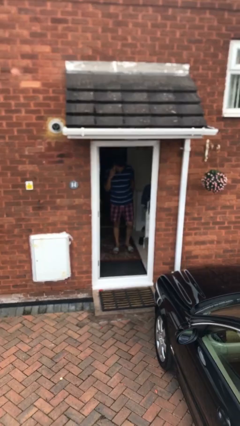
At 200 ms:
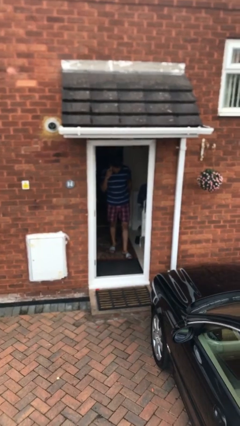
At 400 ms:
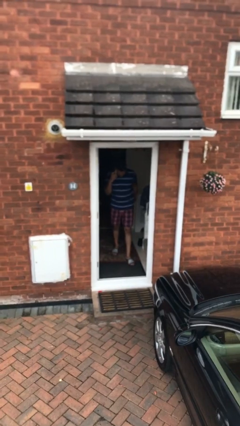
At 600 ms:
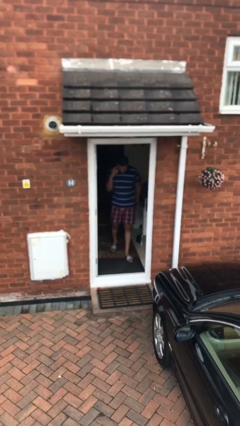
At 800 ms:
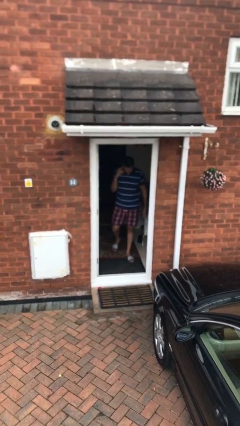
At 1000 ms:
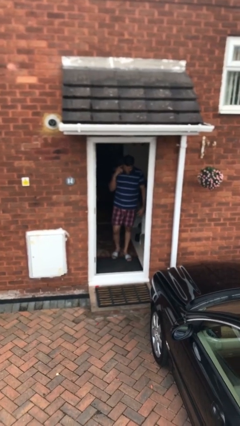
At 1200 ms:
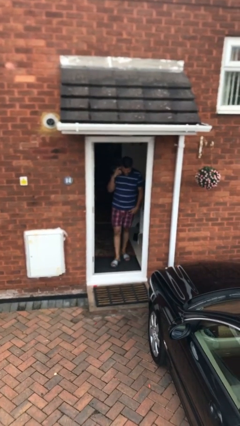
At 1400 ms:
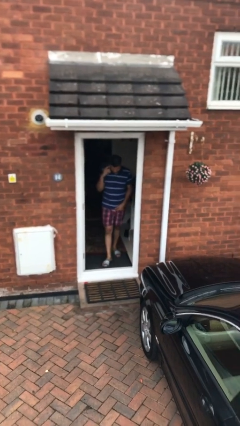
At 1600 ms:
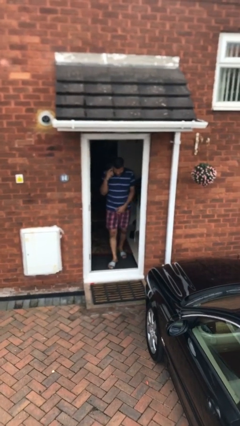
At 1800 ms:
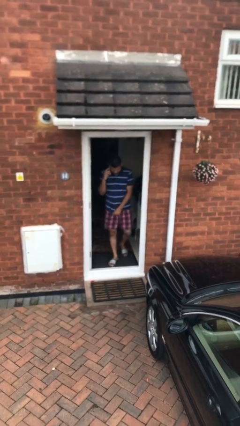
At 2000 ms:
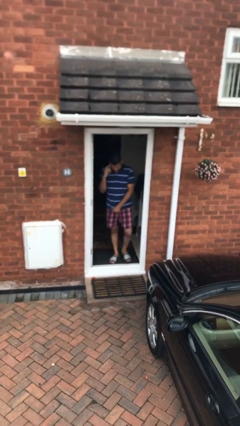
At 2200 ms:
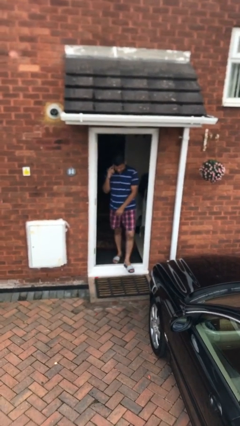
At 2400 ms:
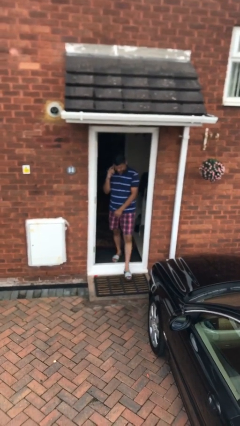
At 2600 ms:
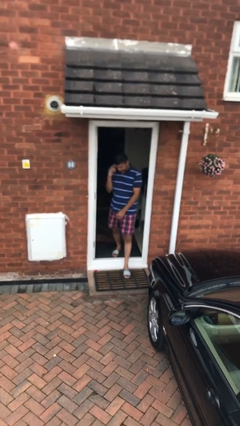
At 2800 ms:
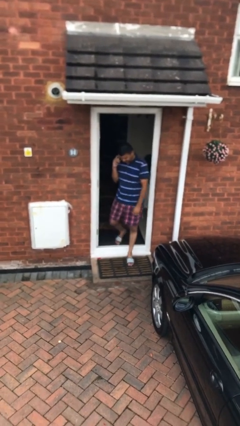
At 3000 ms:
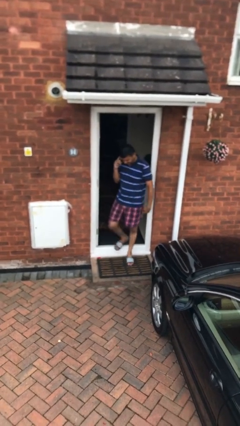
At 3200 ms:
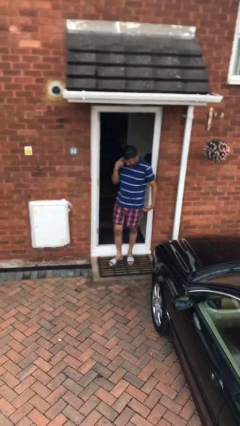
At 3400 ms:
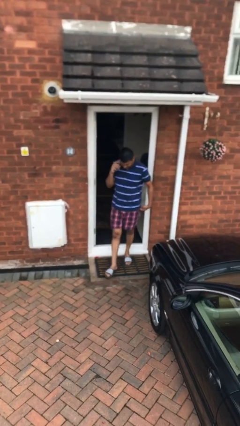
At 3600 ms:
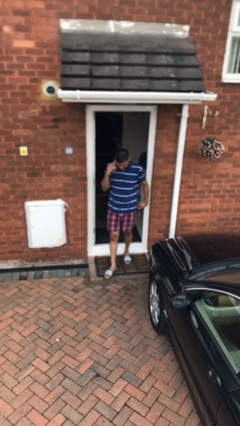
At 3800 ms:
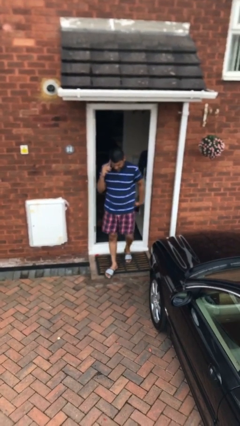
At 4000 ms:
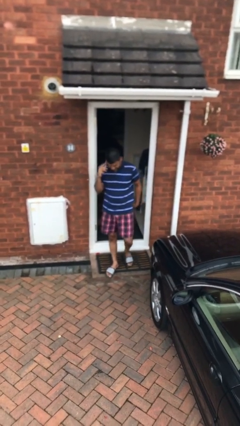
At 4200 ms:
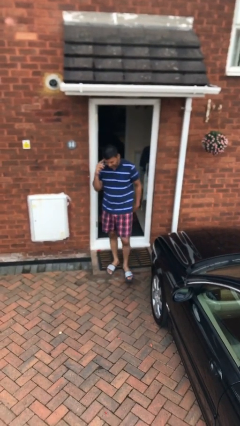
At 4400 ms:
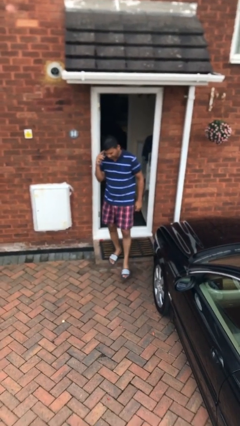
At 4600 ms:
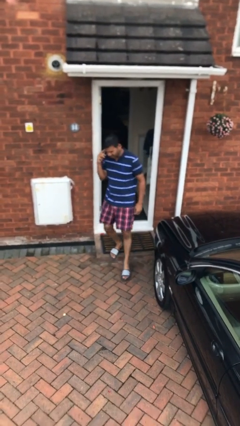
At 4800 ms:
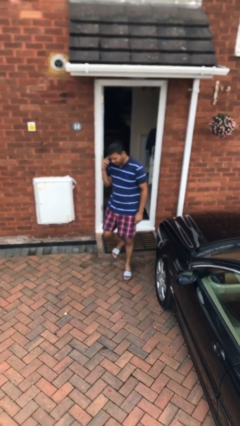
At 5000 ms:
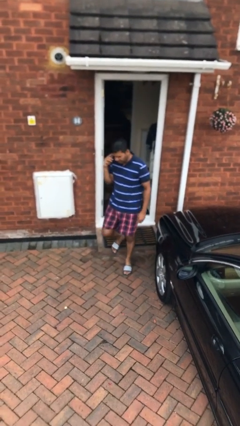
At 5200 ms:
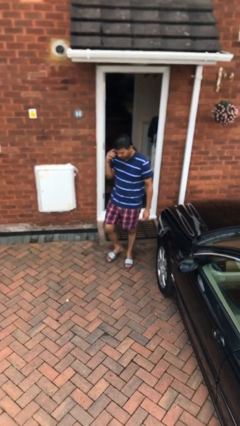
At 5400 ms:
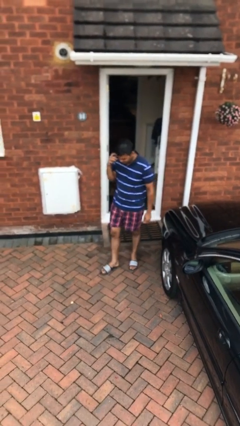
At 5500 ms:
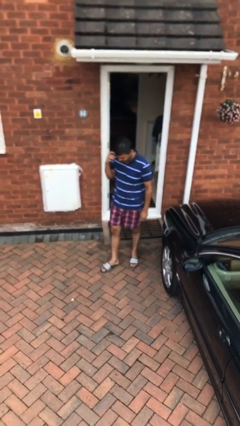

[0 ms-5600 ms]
person enters scene through structure

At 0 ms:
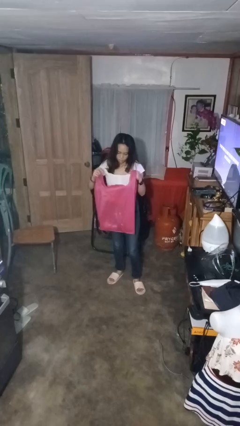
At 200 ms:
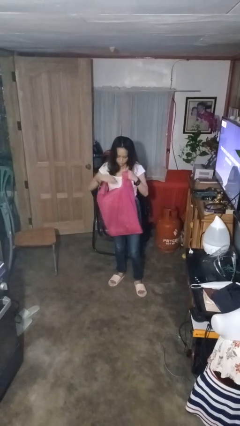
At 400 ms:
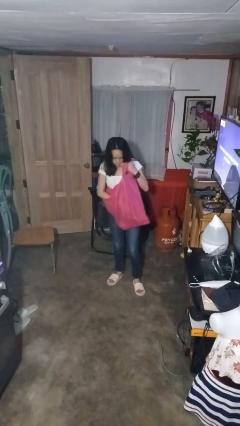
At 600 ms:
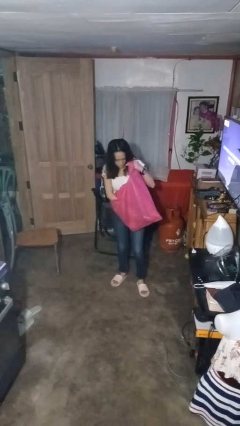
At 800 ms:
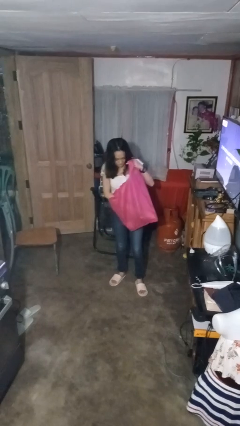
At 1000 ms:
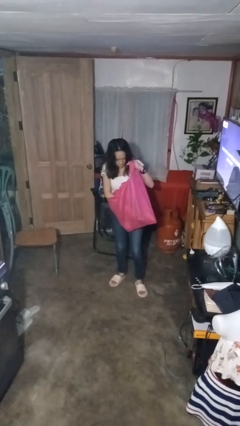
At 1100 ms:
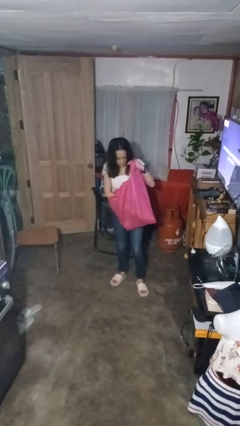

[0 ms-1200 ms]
person searches in bag

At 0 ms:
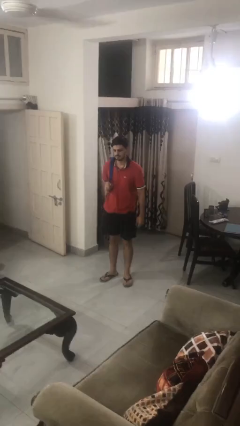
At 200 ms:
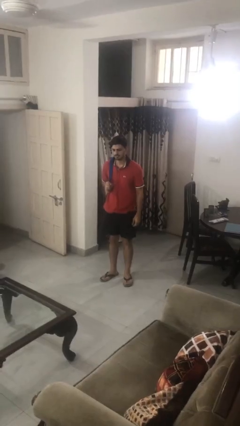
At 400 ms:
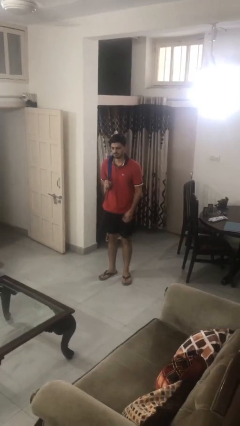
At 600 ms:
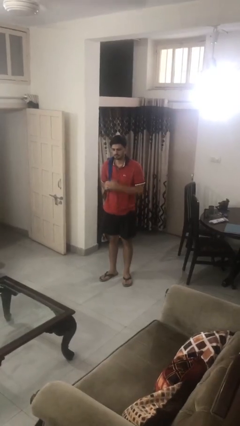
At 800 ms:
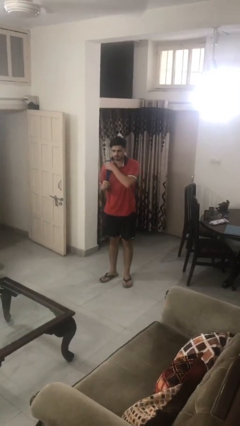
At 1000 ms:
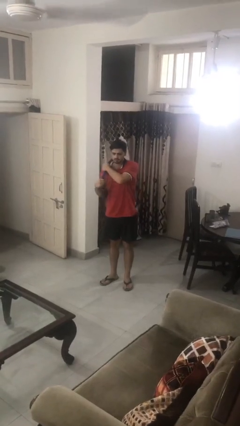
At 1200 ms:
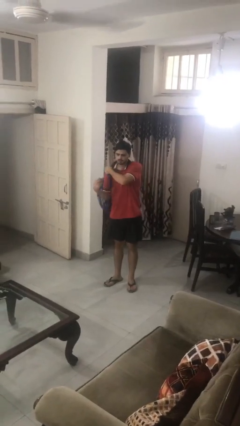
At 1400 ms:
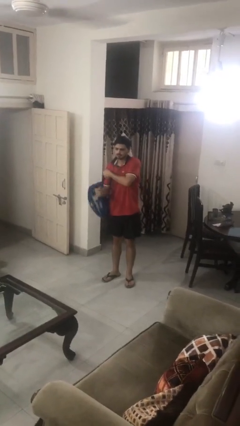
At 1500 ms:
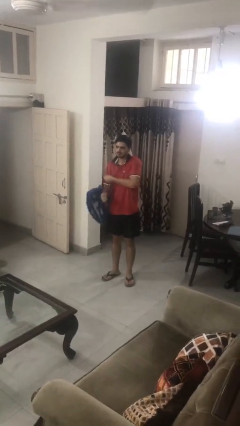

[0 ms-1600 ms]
person takes off backpack

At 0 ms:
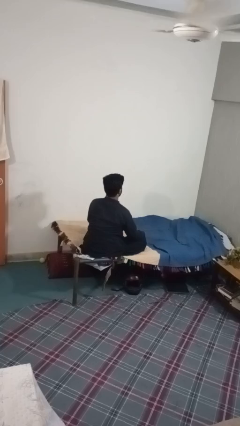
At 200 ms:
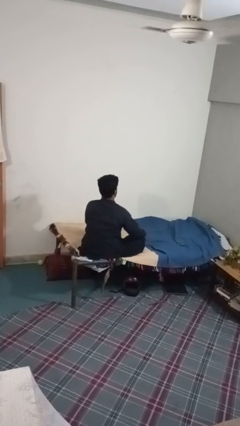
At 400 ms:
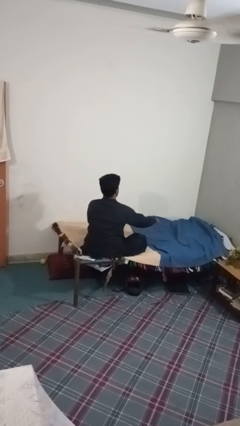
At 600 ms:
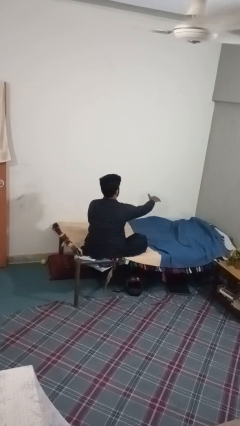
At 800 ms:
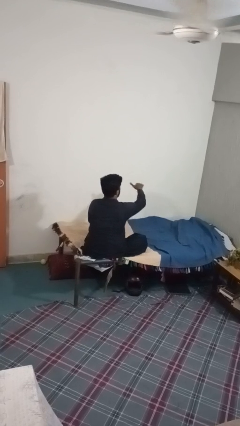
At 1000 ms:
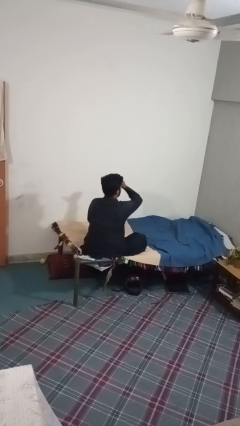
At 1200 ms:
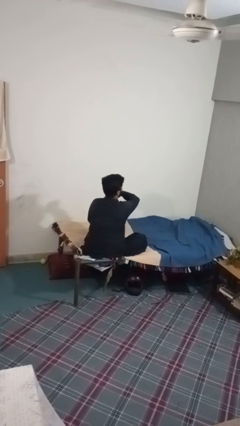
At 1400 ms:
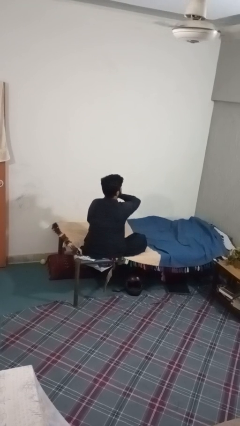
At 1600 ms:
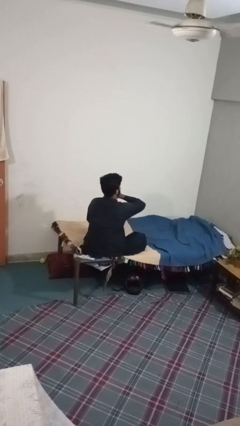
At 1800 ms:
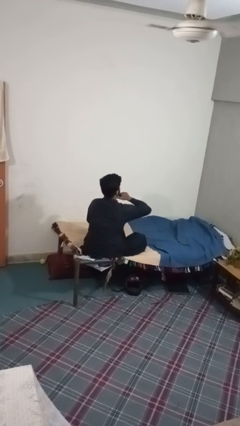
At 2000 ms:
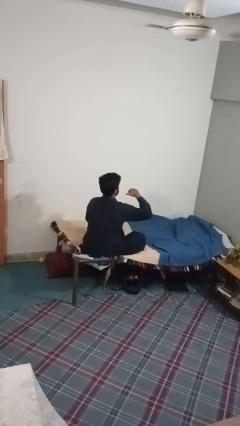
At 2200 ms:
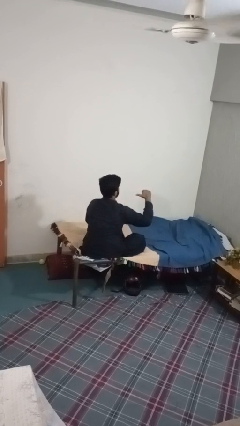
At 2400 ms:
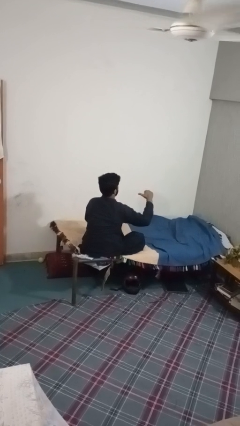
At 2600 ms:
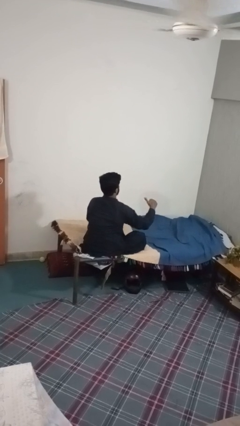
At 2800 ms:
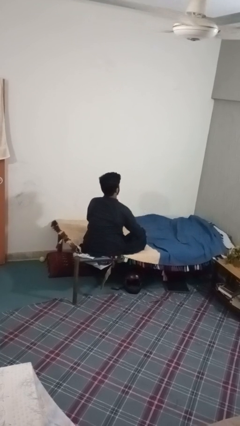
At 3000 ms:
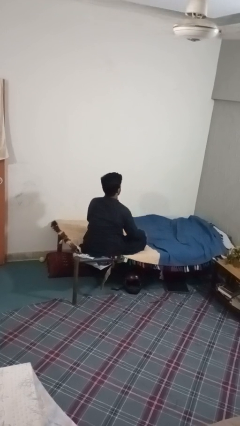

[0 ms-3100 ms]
person gestures cut

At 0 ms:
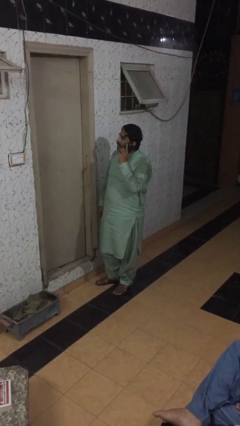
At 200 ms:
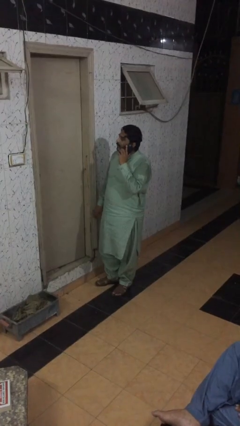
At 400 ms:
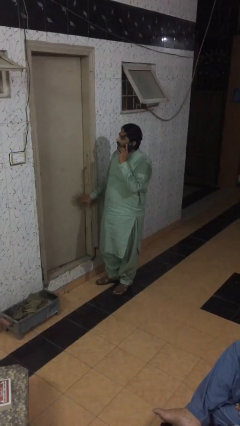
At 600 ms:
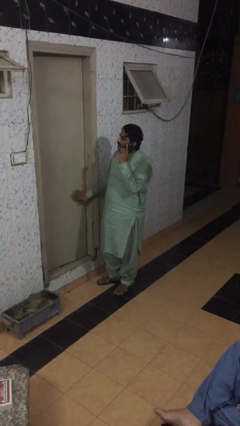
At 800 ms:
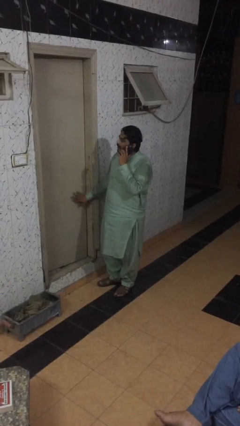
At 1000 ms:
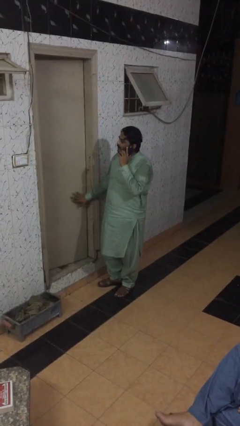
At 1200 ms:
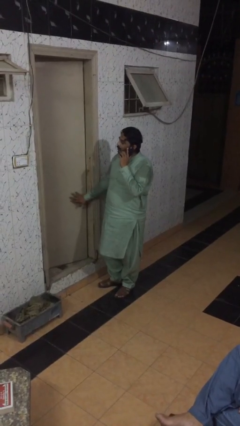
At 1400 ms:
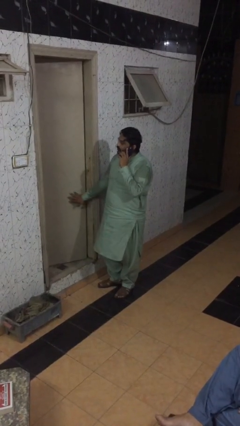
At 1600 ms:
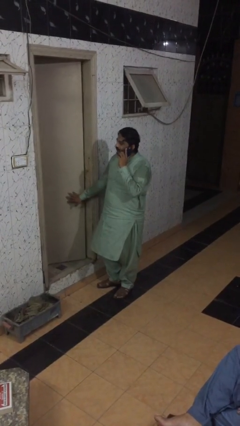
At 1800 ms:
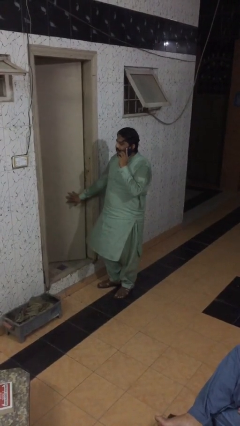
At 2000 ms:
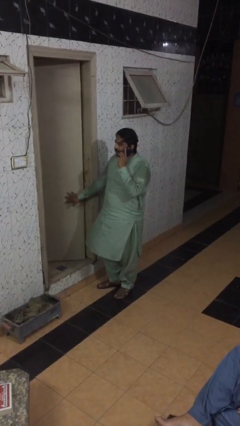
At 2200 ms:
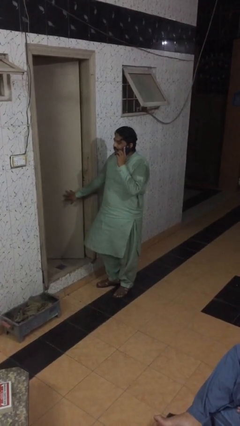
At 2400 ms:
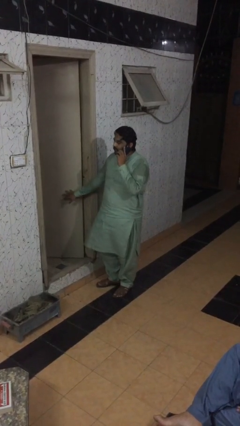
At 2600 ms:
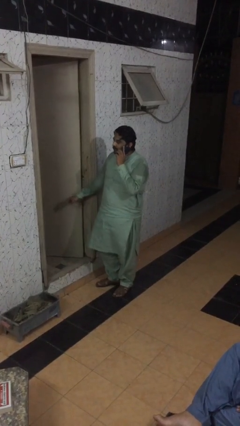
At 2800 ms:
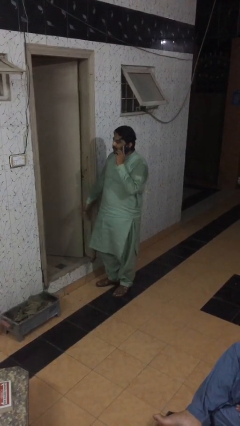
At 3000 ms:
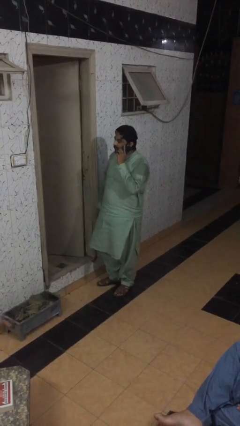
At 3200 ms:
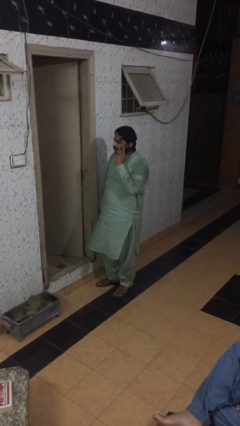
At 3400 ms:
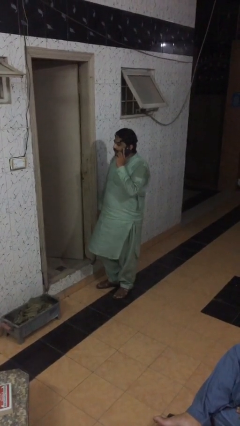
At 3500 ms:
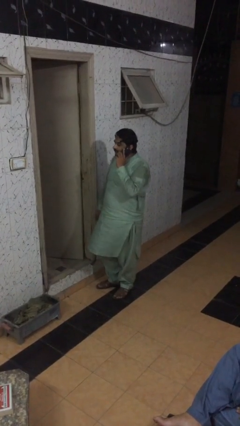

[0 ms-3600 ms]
person opens facility door

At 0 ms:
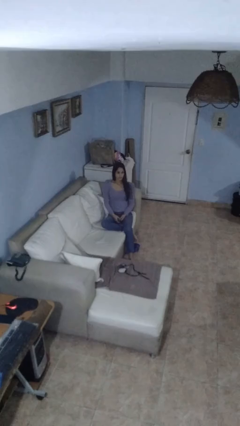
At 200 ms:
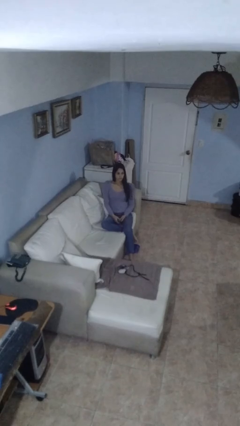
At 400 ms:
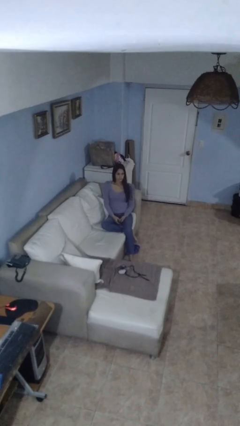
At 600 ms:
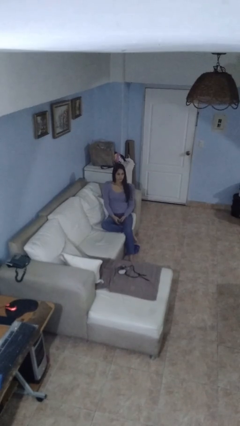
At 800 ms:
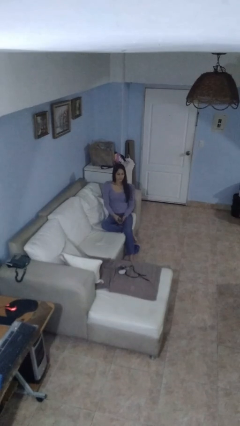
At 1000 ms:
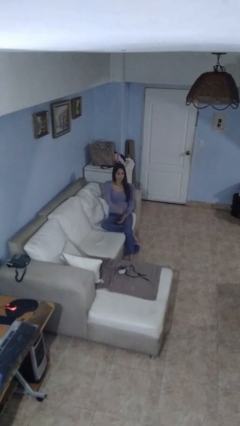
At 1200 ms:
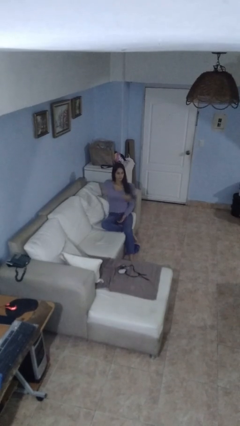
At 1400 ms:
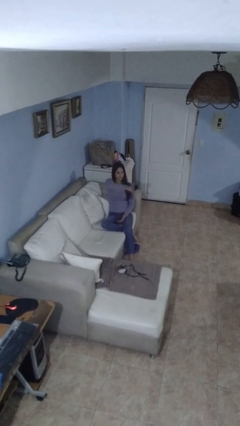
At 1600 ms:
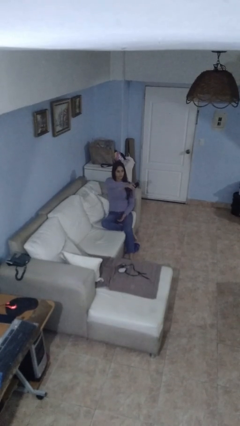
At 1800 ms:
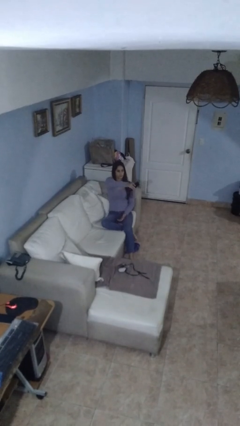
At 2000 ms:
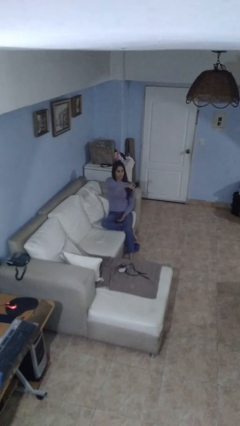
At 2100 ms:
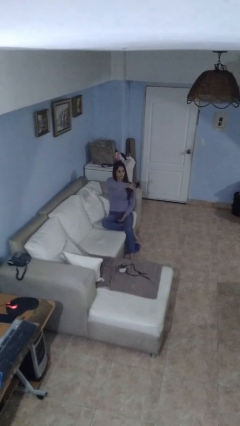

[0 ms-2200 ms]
person uses television remote
